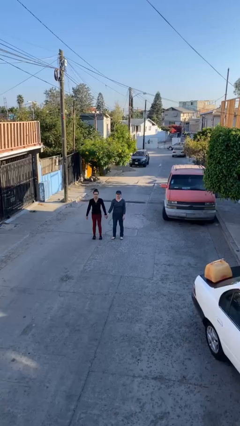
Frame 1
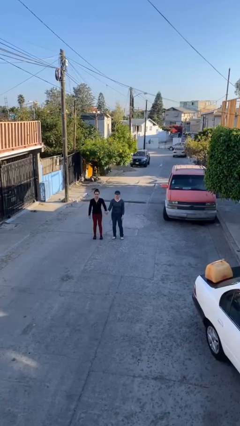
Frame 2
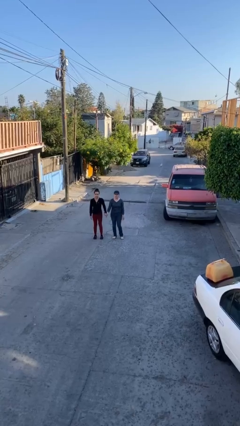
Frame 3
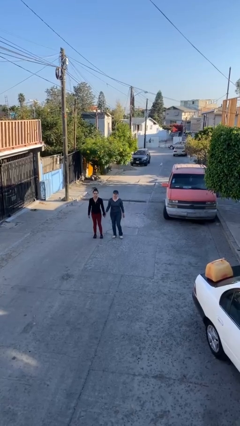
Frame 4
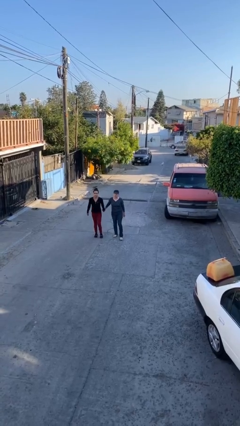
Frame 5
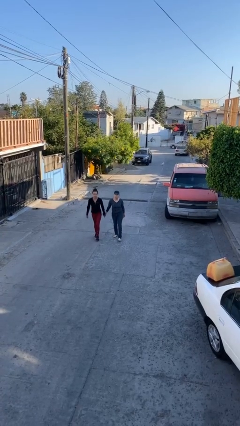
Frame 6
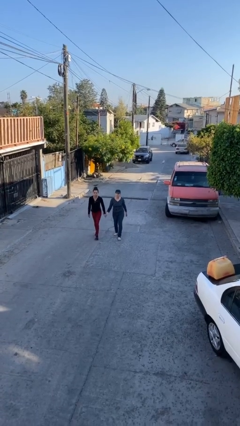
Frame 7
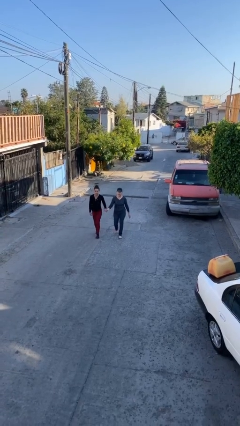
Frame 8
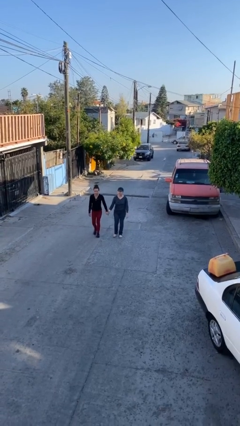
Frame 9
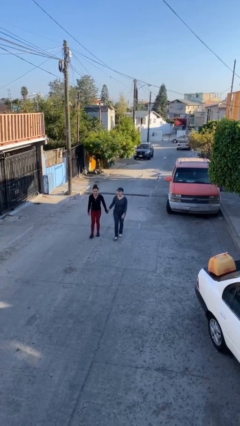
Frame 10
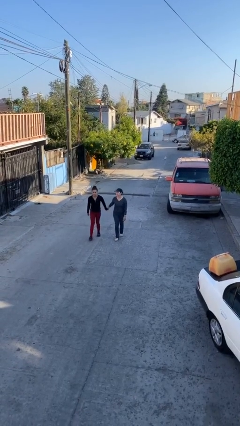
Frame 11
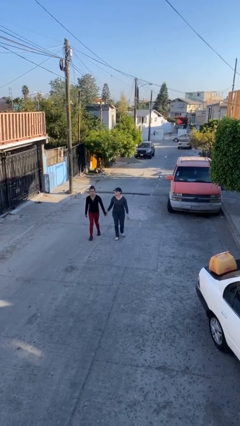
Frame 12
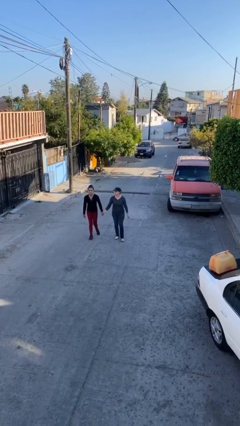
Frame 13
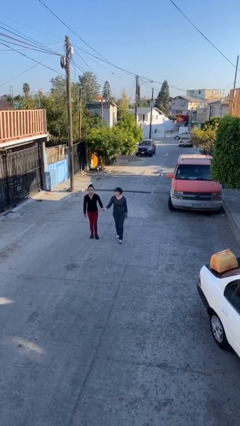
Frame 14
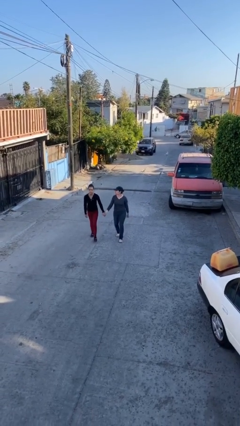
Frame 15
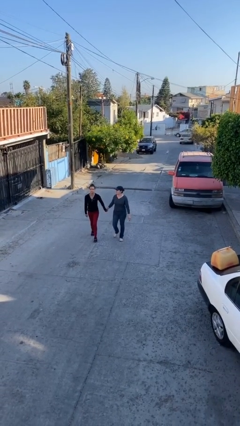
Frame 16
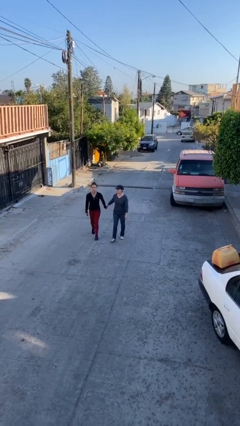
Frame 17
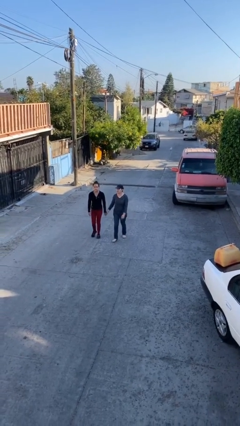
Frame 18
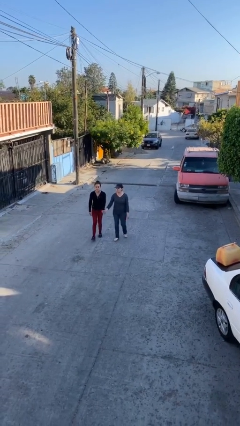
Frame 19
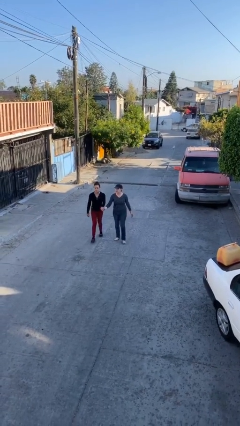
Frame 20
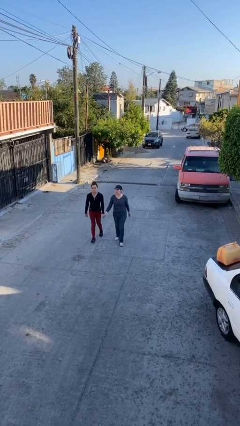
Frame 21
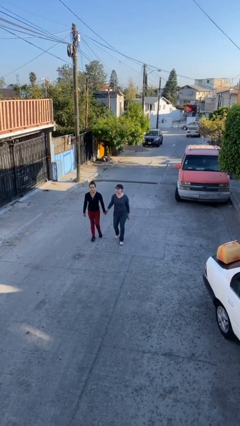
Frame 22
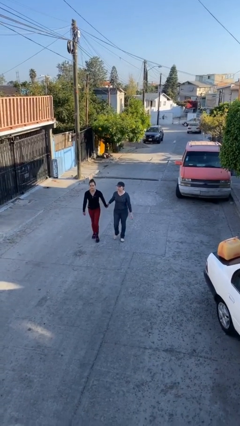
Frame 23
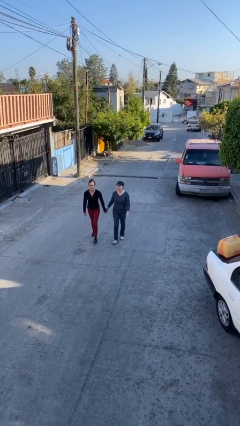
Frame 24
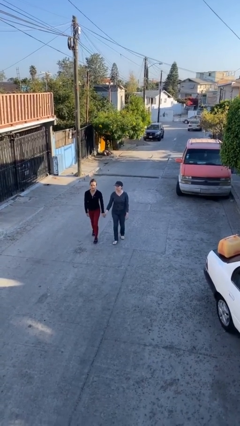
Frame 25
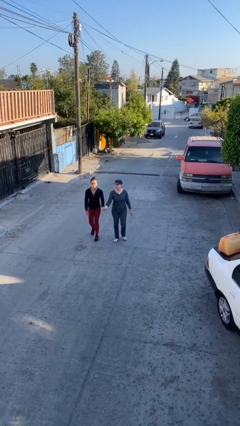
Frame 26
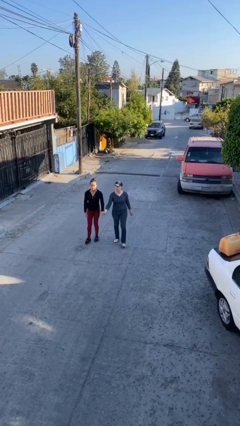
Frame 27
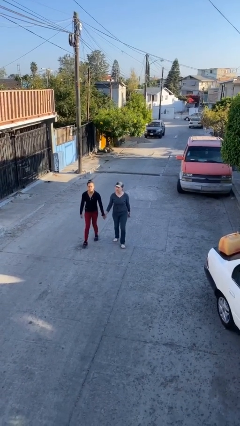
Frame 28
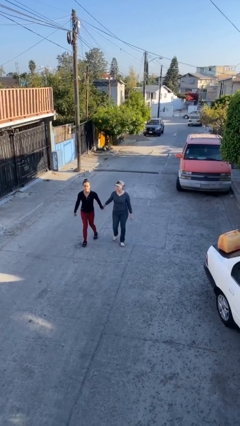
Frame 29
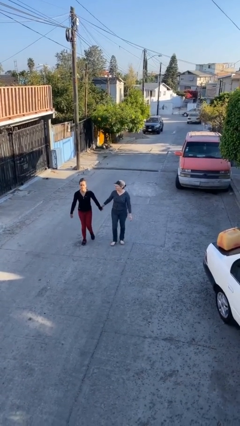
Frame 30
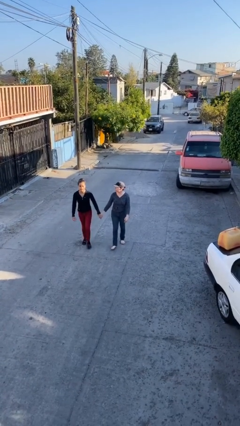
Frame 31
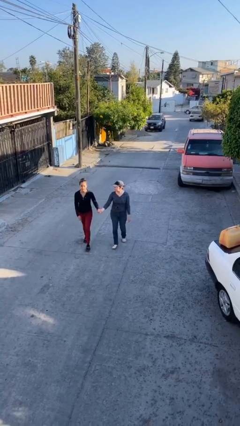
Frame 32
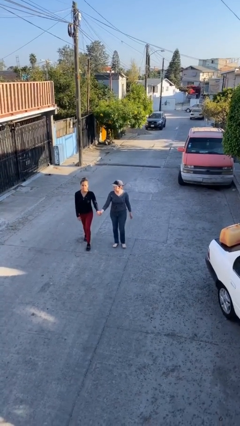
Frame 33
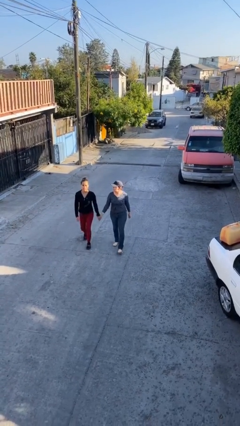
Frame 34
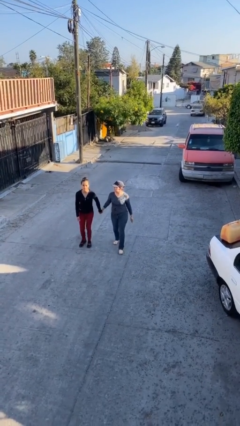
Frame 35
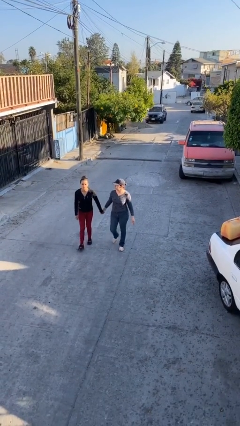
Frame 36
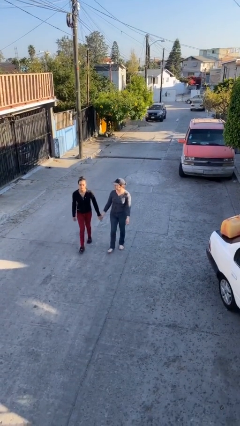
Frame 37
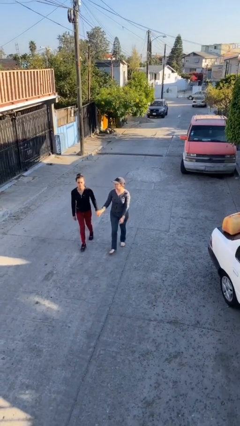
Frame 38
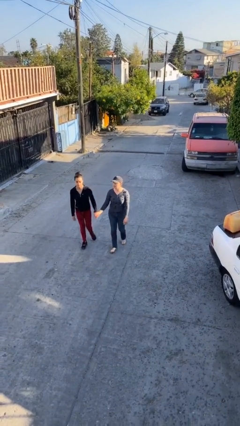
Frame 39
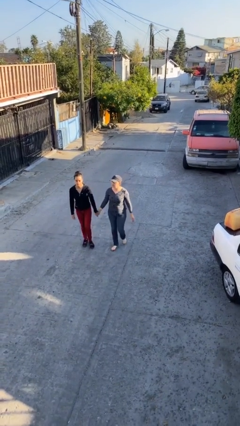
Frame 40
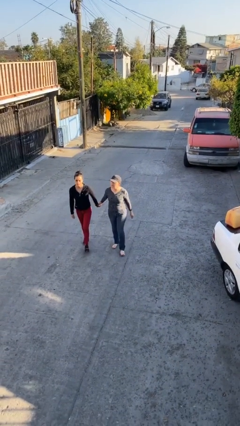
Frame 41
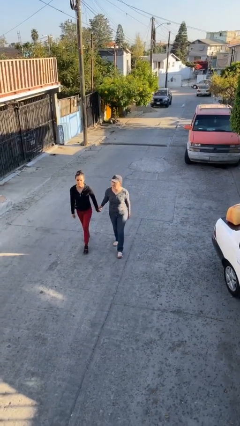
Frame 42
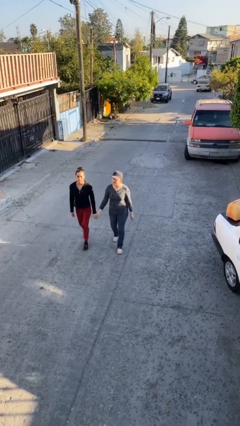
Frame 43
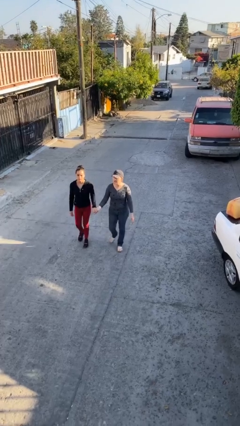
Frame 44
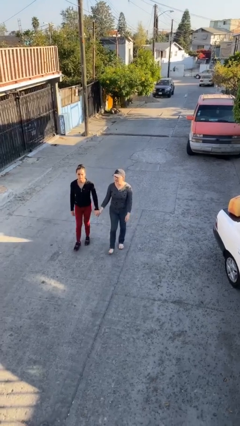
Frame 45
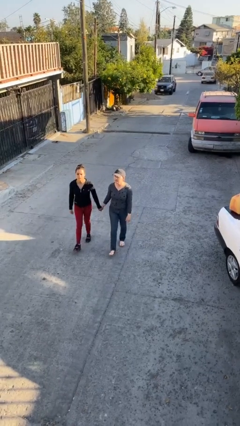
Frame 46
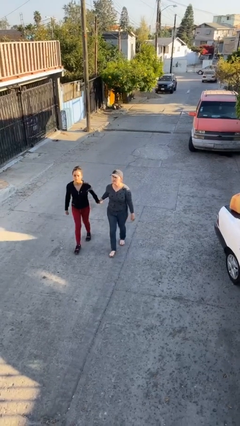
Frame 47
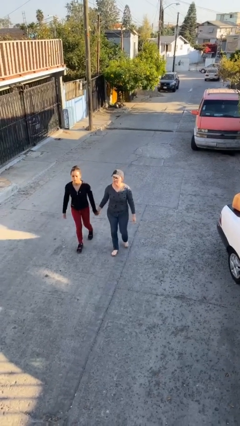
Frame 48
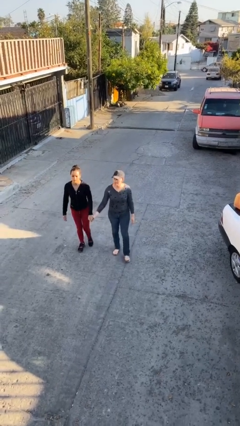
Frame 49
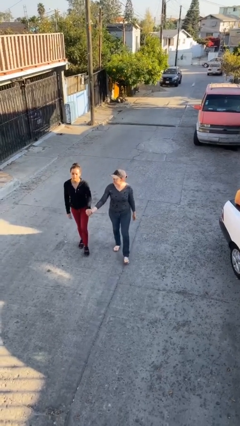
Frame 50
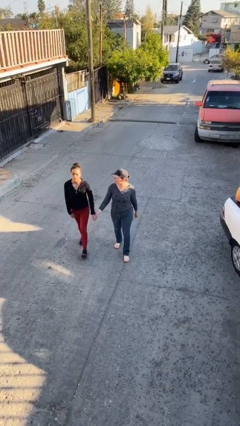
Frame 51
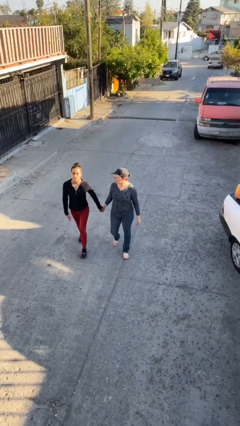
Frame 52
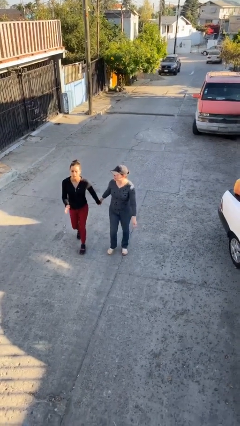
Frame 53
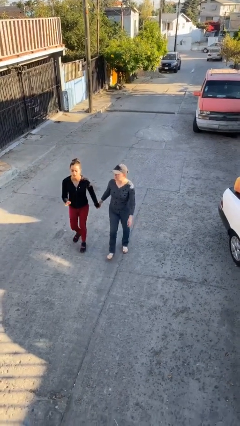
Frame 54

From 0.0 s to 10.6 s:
person holds hand

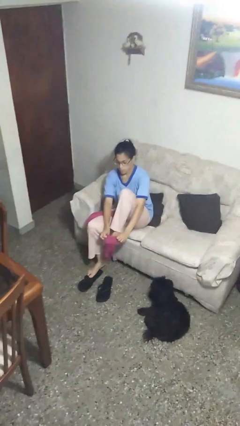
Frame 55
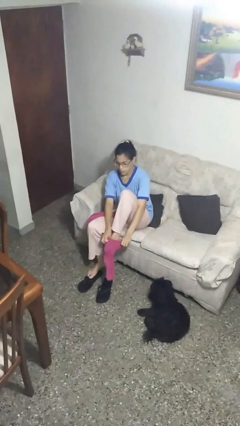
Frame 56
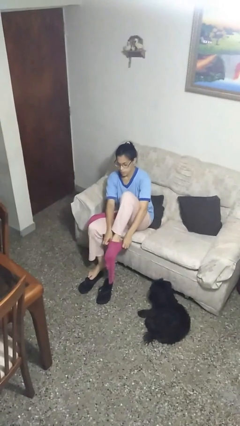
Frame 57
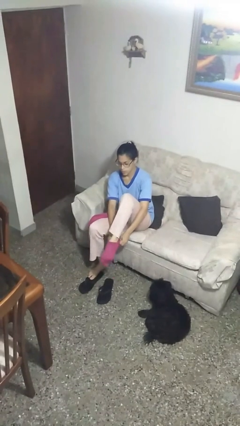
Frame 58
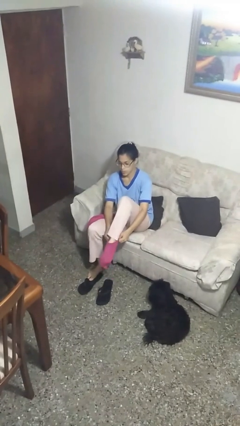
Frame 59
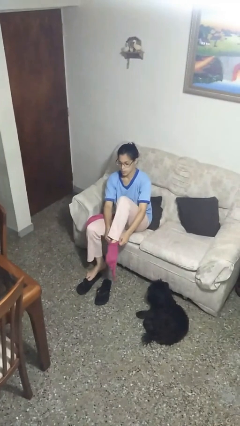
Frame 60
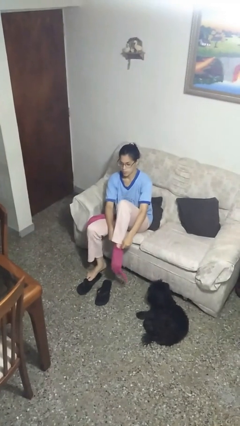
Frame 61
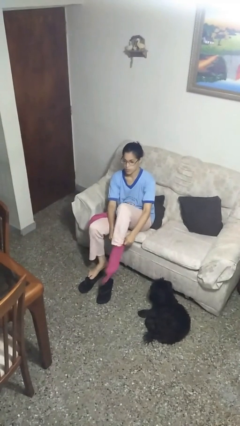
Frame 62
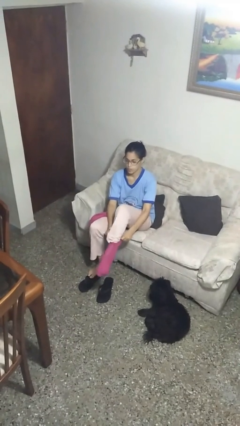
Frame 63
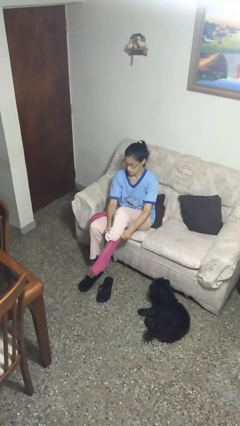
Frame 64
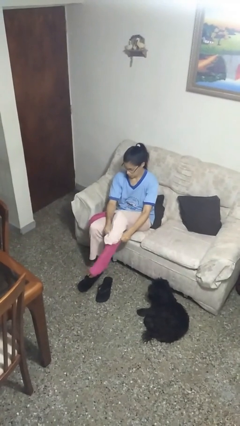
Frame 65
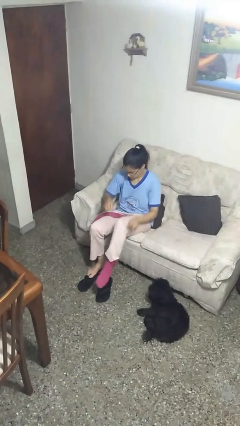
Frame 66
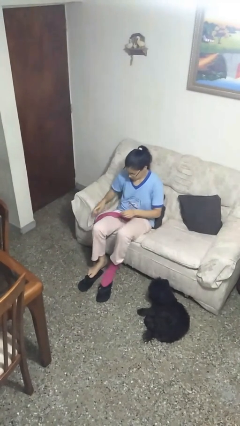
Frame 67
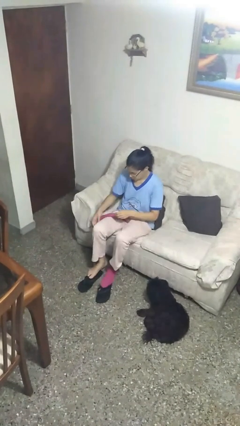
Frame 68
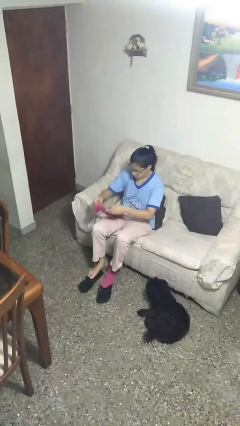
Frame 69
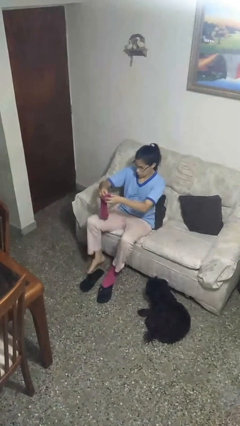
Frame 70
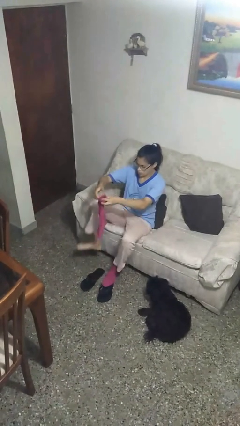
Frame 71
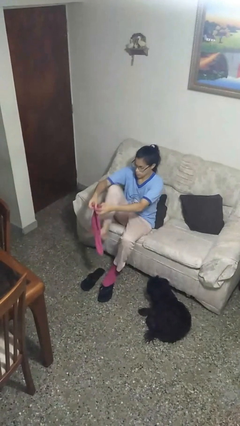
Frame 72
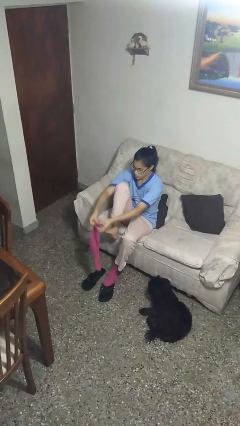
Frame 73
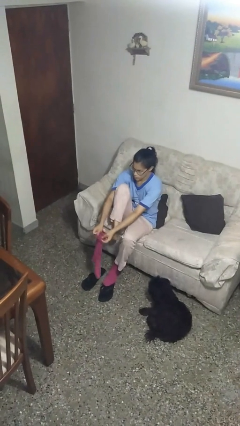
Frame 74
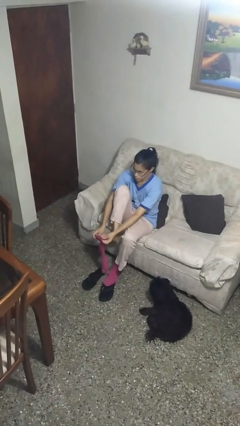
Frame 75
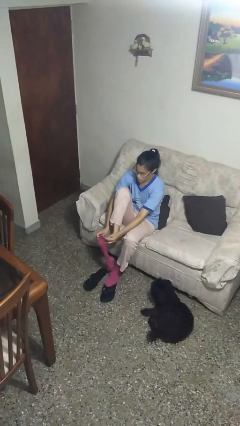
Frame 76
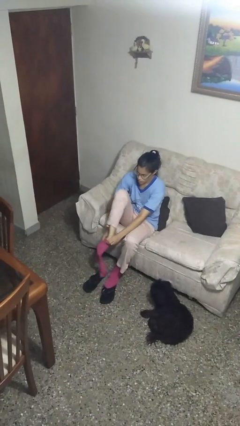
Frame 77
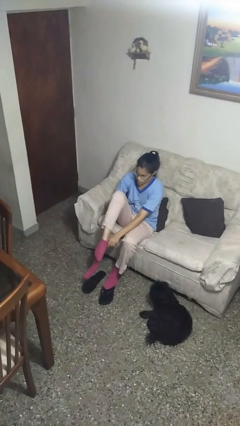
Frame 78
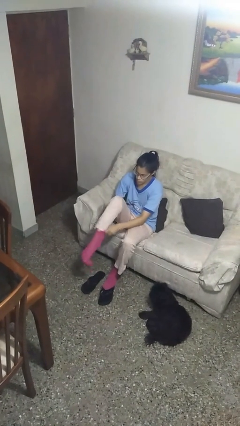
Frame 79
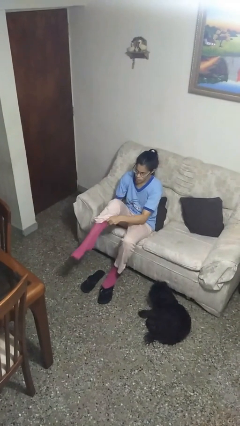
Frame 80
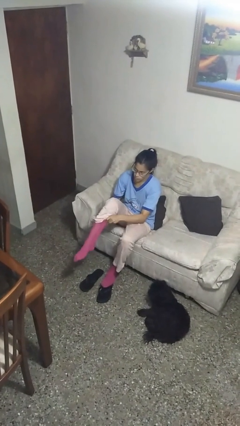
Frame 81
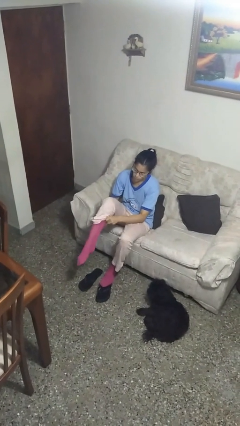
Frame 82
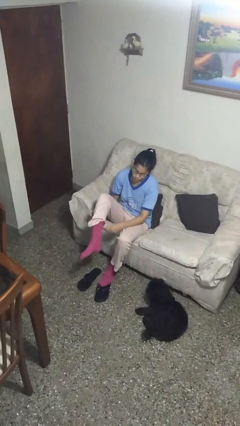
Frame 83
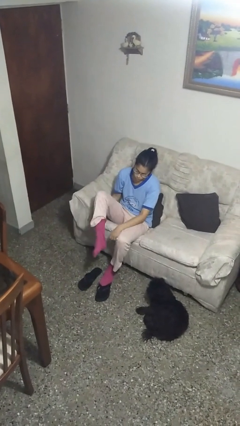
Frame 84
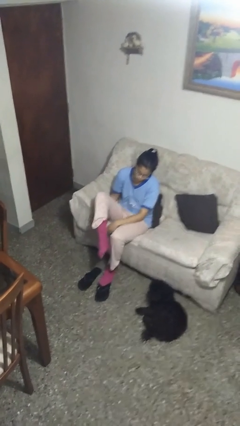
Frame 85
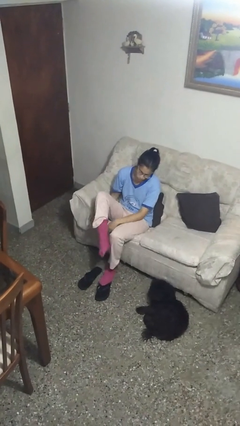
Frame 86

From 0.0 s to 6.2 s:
person puts on socks

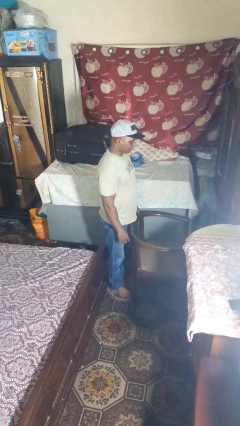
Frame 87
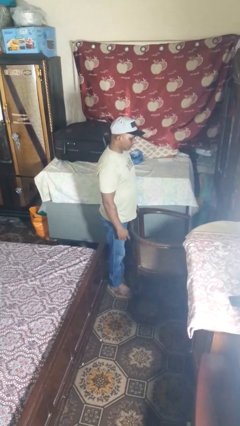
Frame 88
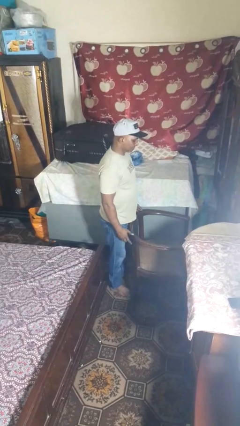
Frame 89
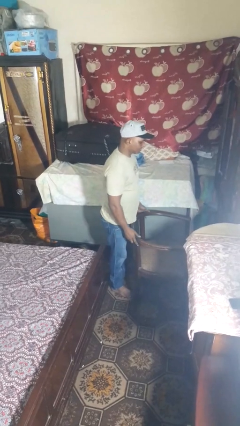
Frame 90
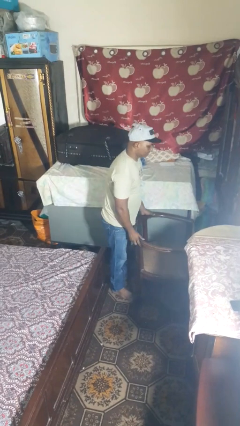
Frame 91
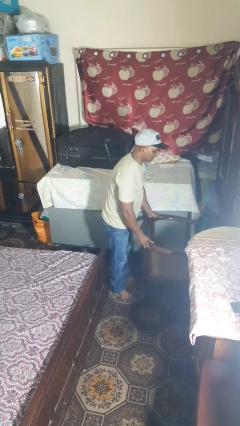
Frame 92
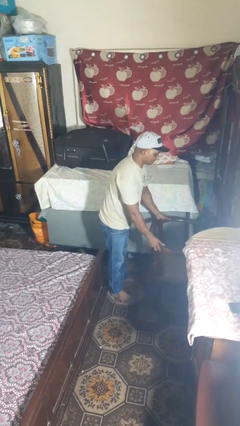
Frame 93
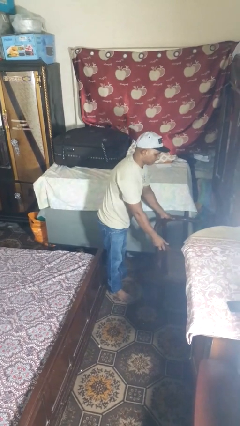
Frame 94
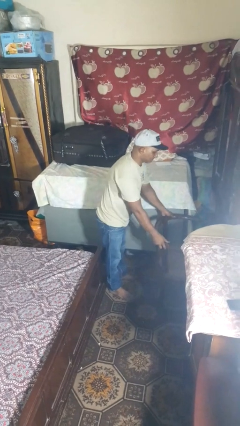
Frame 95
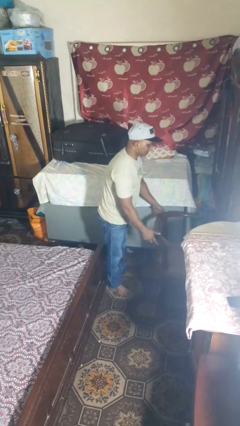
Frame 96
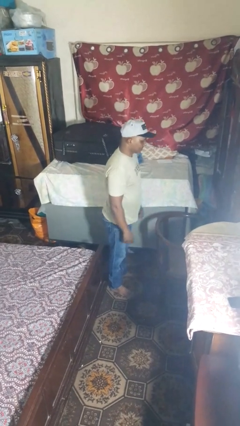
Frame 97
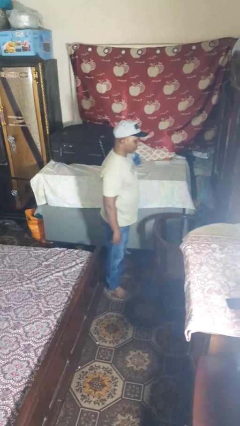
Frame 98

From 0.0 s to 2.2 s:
person pushes in chair
